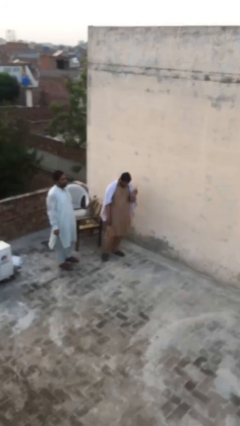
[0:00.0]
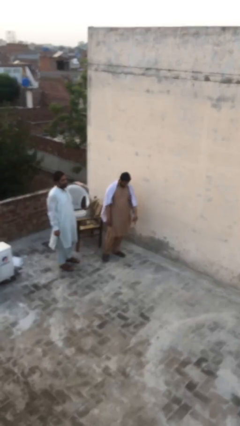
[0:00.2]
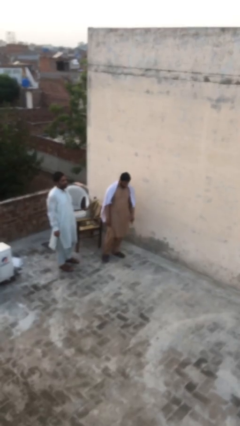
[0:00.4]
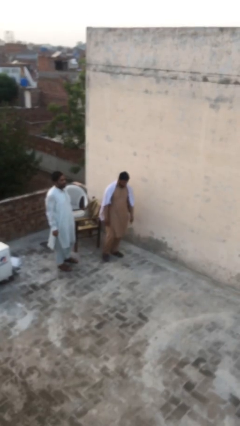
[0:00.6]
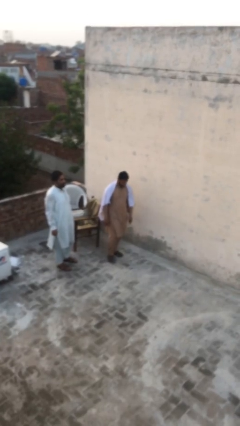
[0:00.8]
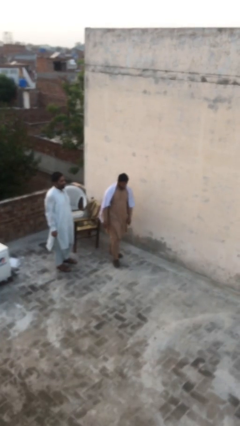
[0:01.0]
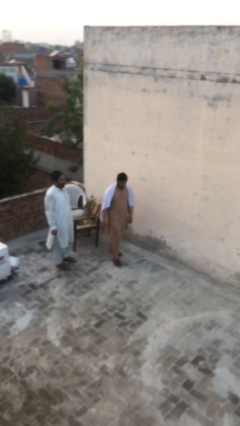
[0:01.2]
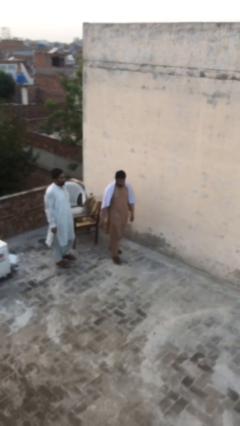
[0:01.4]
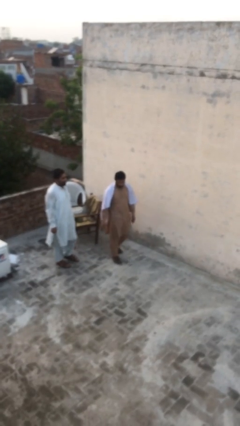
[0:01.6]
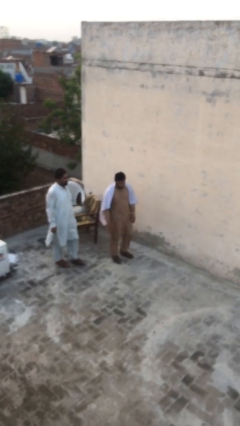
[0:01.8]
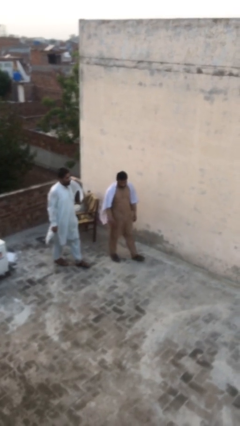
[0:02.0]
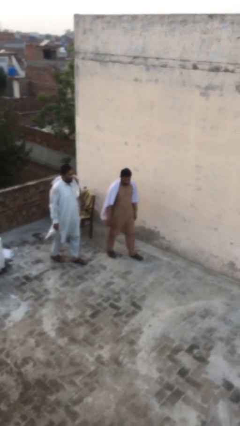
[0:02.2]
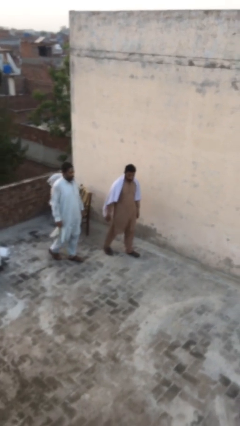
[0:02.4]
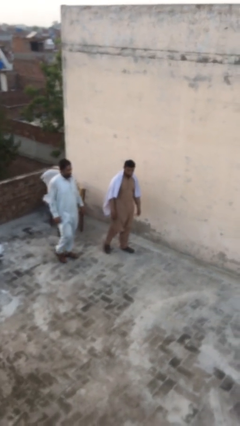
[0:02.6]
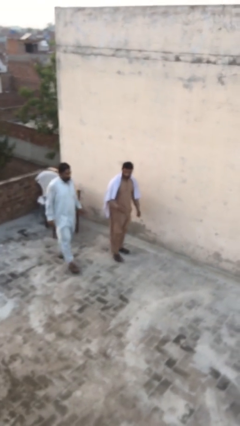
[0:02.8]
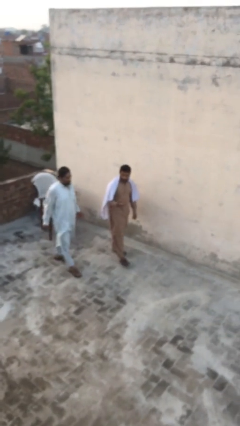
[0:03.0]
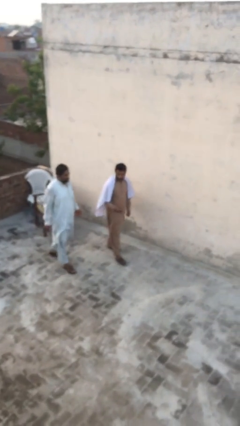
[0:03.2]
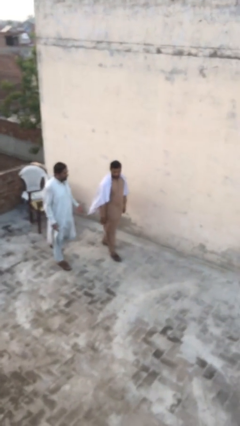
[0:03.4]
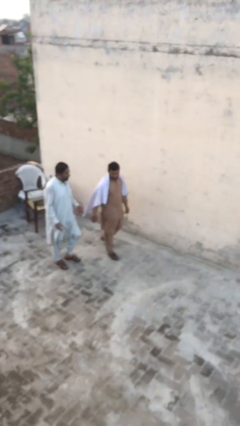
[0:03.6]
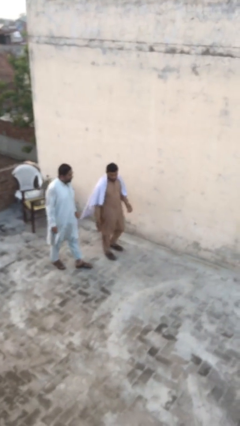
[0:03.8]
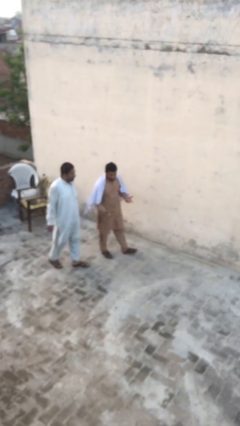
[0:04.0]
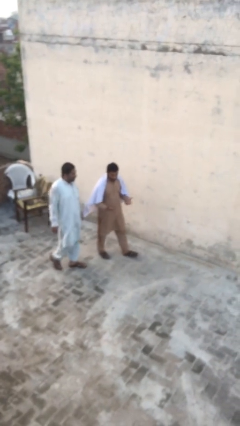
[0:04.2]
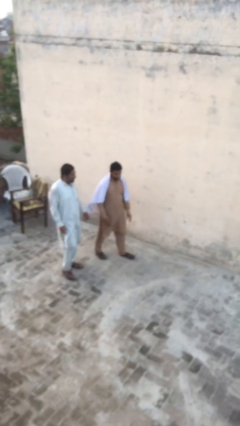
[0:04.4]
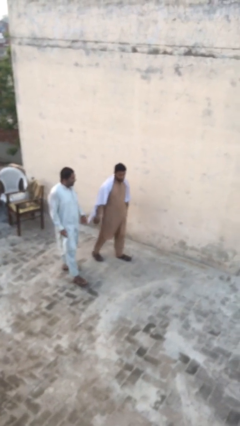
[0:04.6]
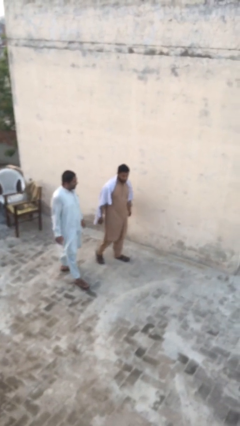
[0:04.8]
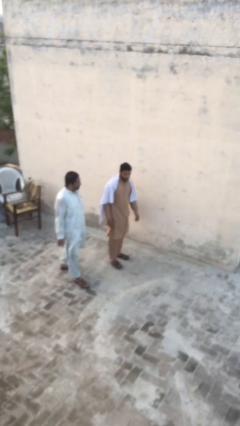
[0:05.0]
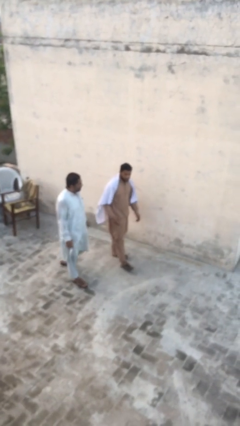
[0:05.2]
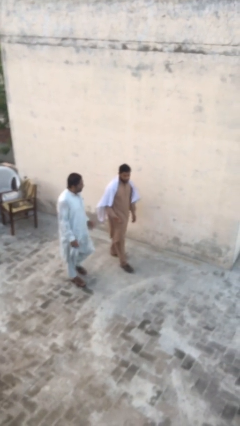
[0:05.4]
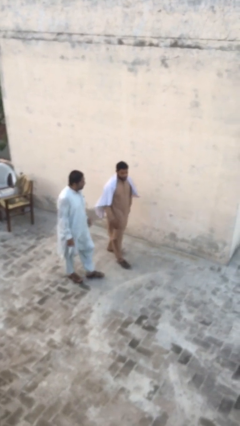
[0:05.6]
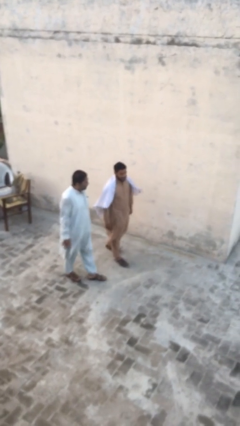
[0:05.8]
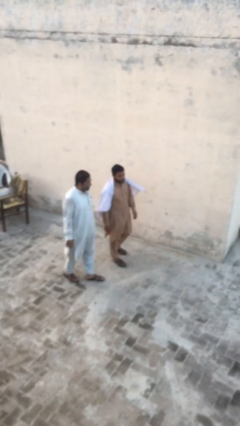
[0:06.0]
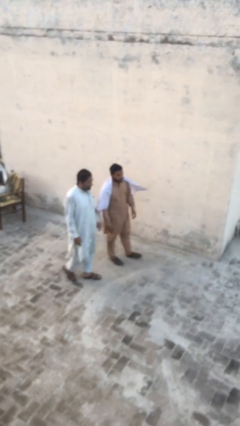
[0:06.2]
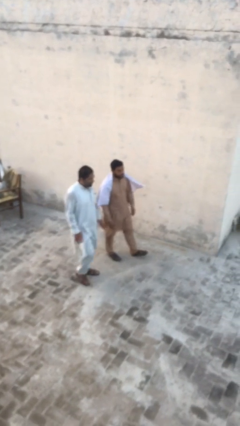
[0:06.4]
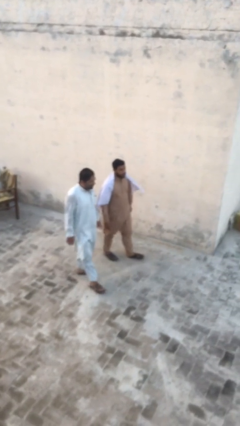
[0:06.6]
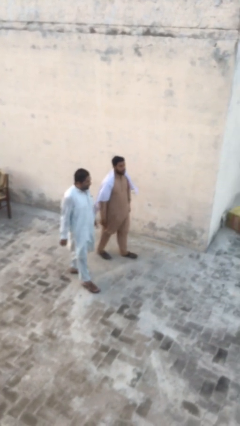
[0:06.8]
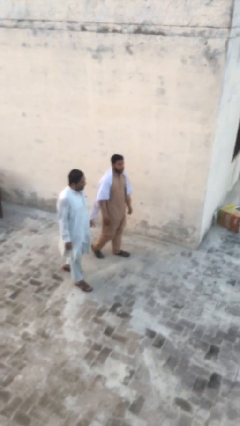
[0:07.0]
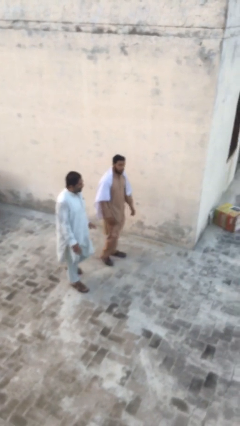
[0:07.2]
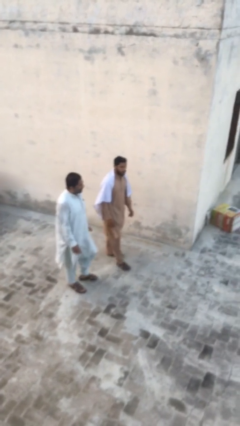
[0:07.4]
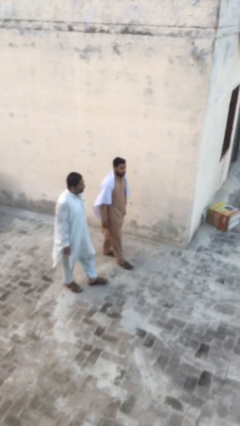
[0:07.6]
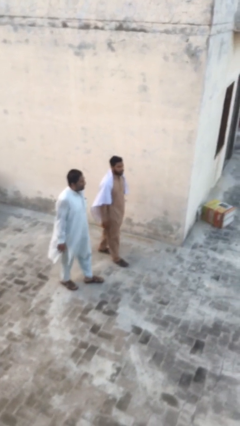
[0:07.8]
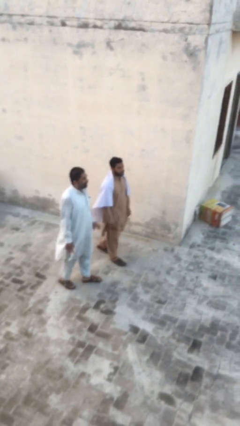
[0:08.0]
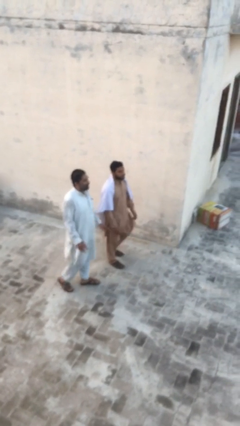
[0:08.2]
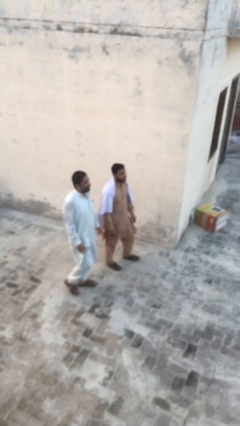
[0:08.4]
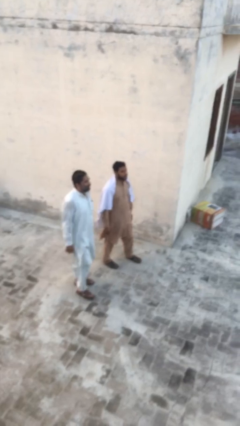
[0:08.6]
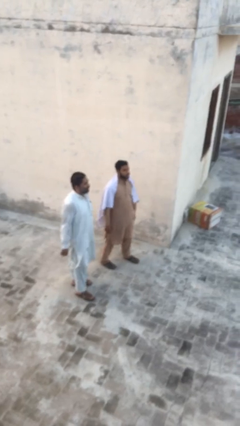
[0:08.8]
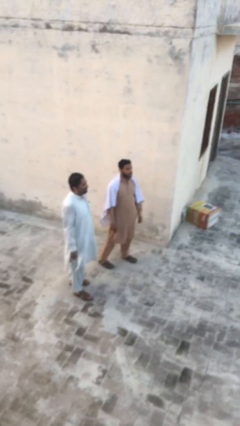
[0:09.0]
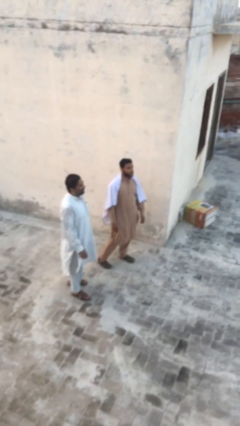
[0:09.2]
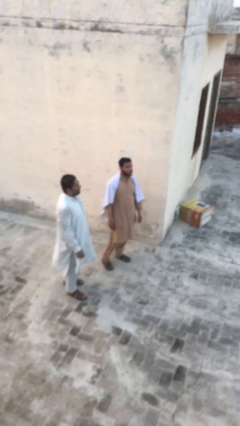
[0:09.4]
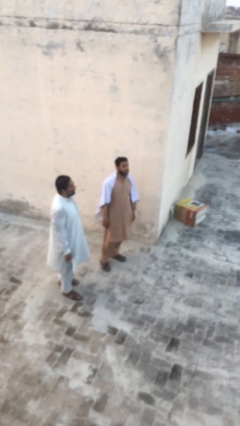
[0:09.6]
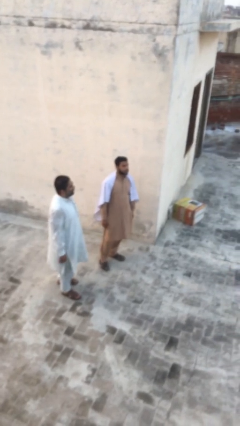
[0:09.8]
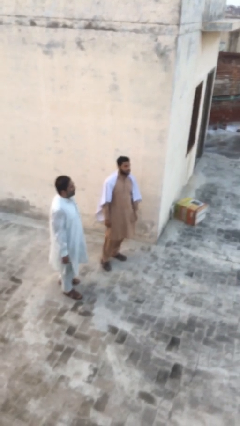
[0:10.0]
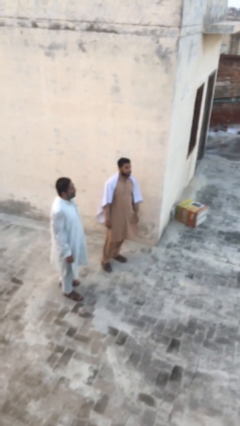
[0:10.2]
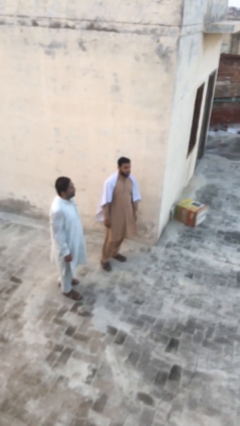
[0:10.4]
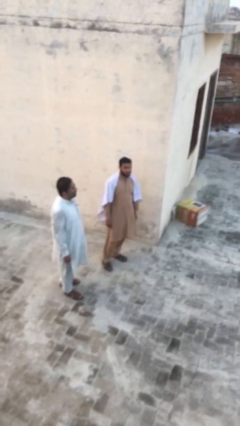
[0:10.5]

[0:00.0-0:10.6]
person talks to person

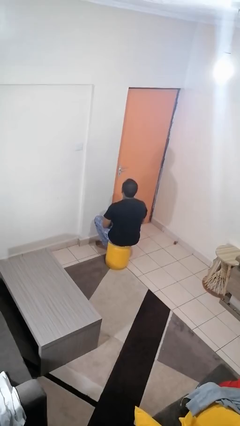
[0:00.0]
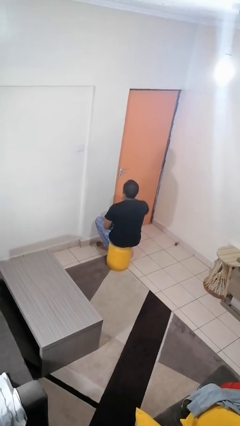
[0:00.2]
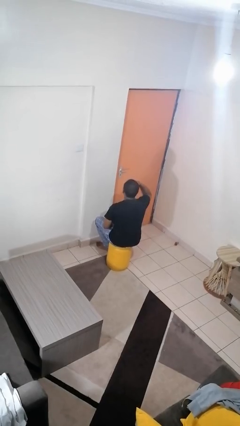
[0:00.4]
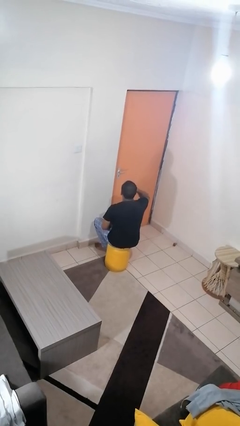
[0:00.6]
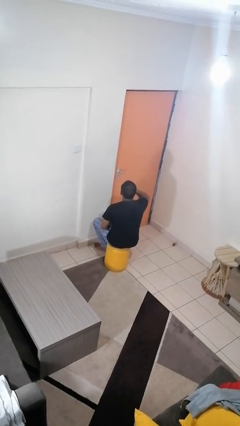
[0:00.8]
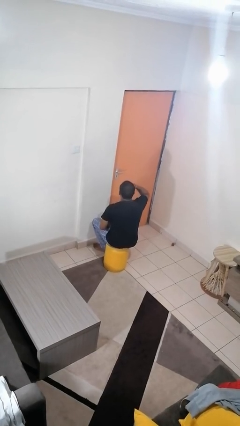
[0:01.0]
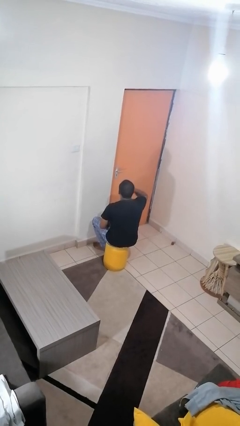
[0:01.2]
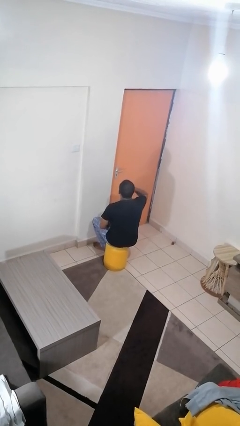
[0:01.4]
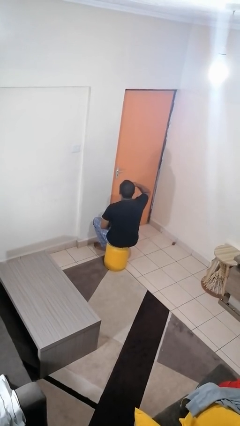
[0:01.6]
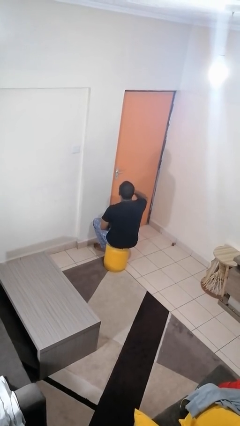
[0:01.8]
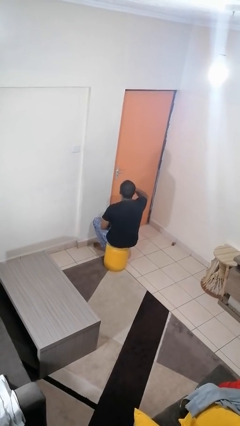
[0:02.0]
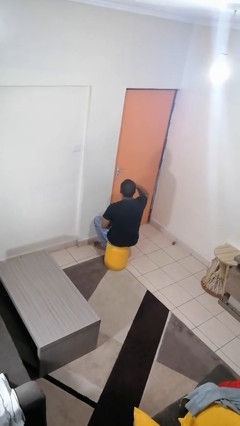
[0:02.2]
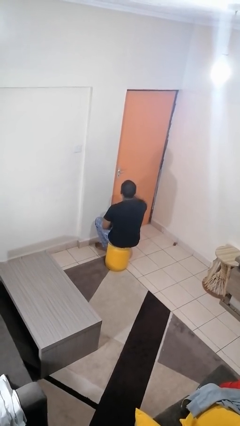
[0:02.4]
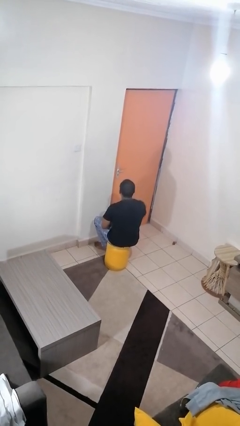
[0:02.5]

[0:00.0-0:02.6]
person rubs eyes

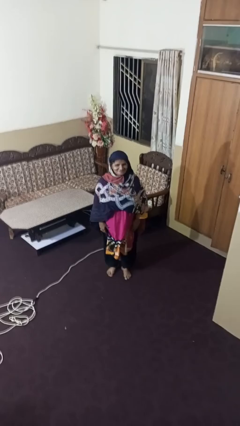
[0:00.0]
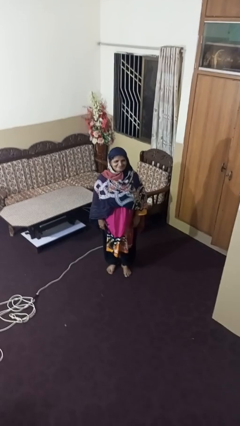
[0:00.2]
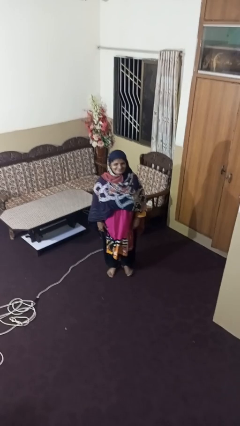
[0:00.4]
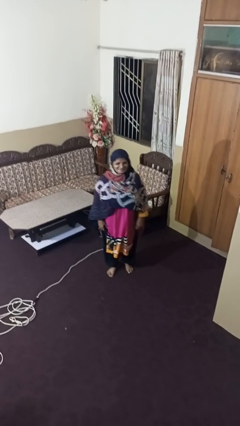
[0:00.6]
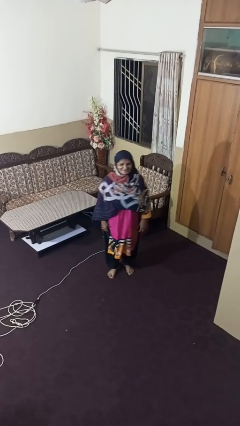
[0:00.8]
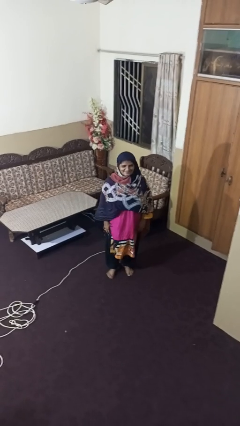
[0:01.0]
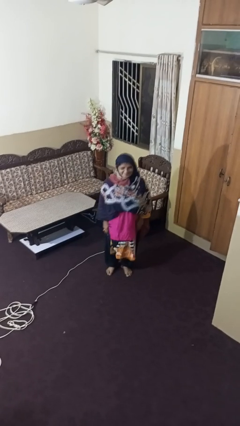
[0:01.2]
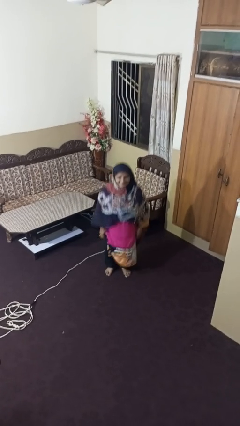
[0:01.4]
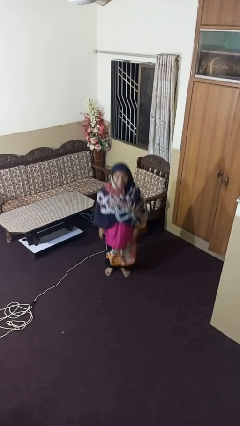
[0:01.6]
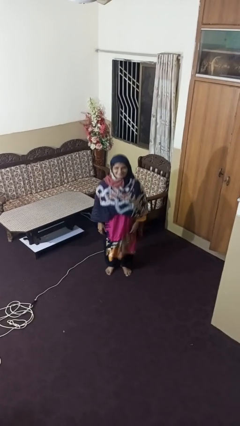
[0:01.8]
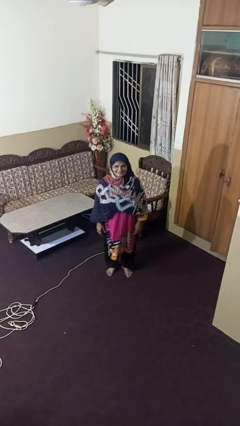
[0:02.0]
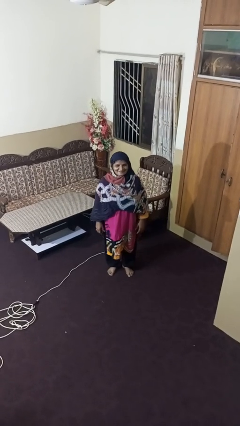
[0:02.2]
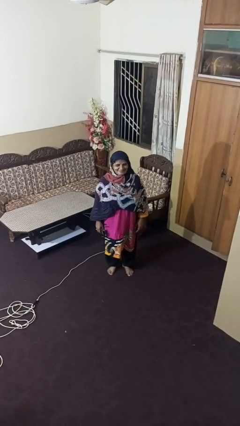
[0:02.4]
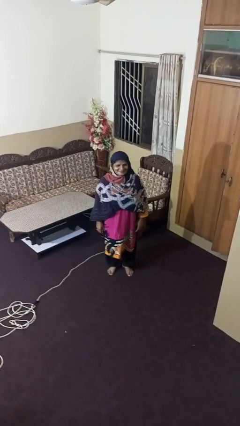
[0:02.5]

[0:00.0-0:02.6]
person jumps

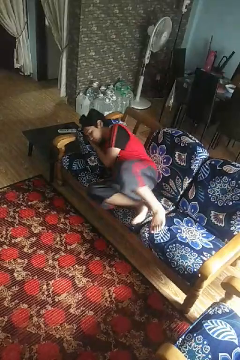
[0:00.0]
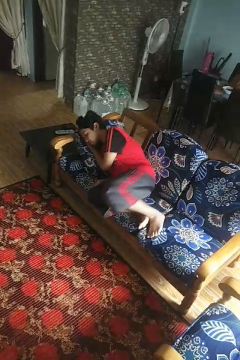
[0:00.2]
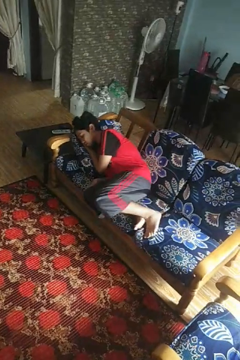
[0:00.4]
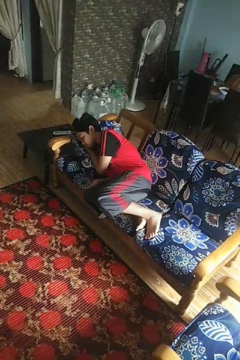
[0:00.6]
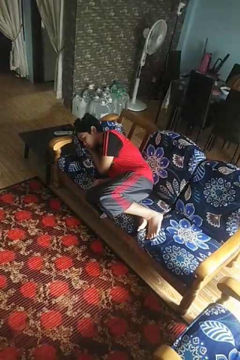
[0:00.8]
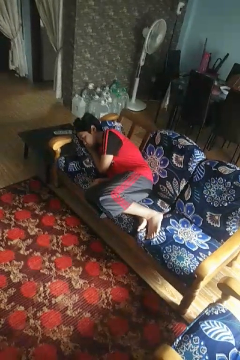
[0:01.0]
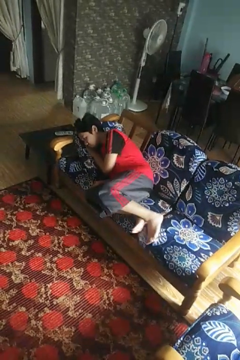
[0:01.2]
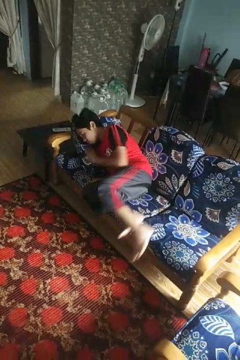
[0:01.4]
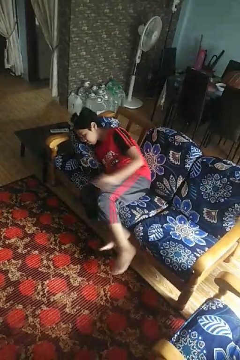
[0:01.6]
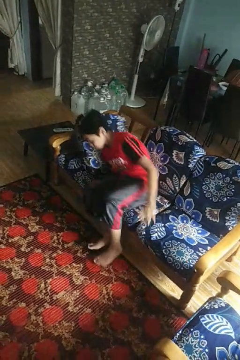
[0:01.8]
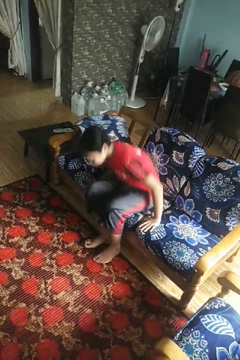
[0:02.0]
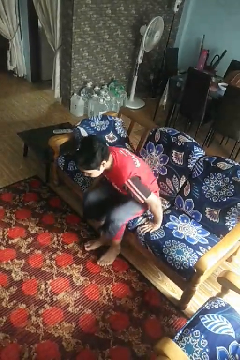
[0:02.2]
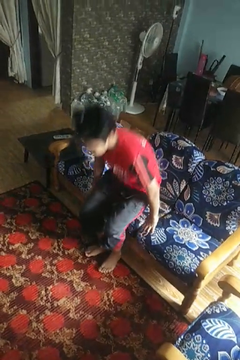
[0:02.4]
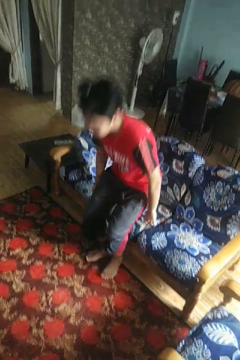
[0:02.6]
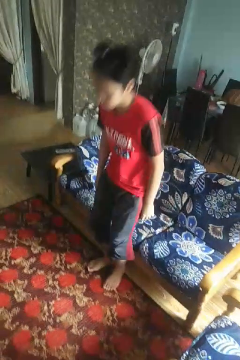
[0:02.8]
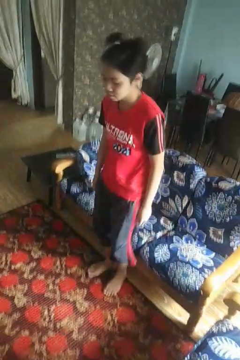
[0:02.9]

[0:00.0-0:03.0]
person stands up

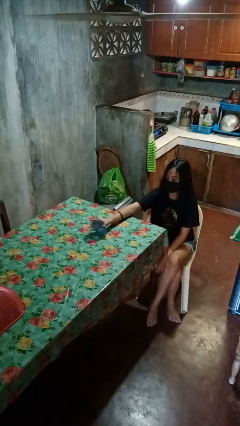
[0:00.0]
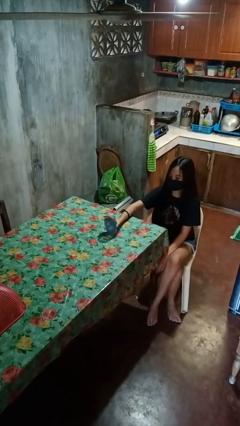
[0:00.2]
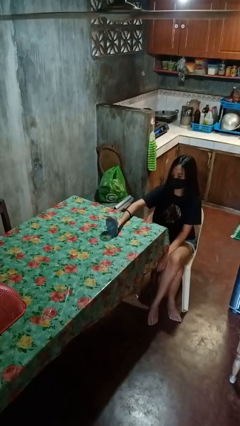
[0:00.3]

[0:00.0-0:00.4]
person sets upright glass
